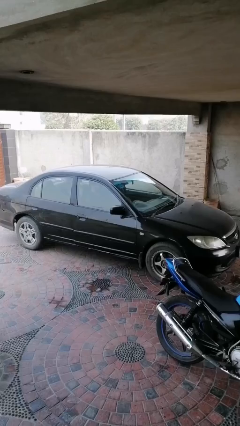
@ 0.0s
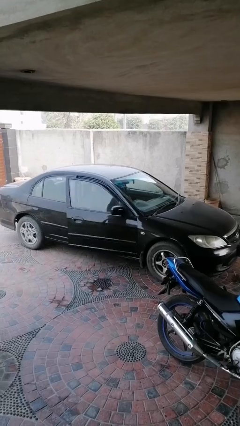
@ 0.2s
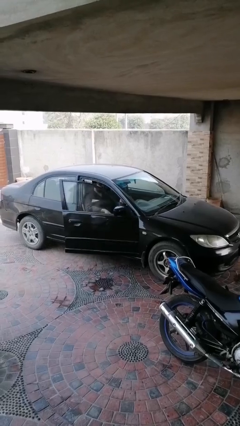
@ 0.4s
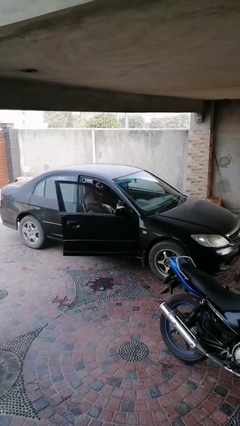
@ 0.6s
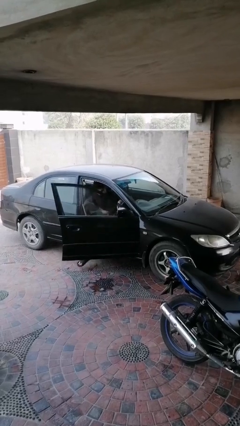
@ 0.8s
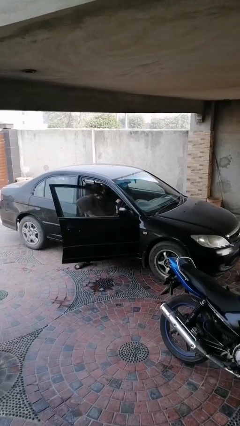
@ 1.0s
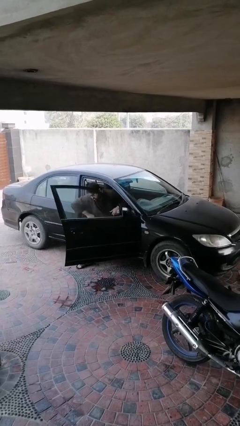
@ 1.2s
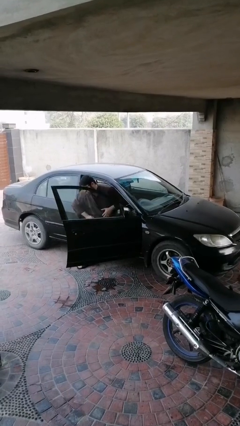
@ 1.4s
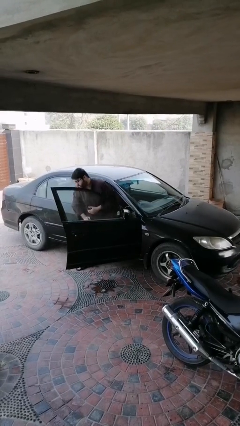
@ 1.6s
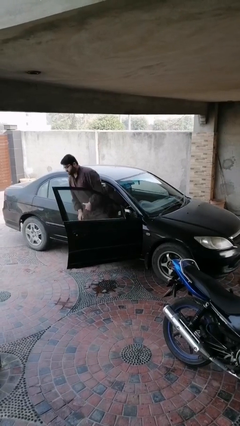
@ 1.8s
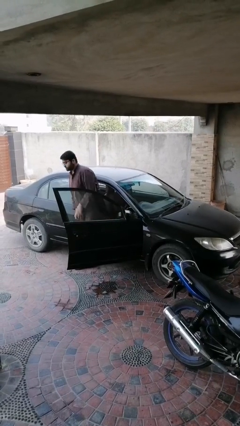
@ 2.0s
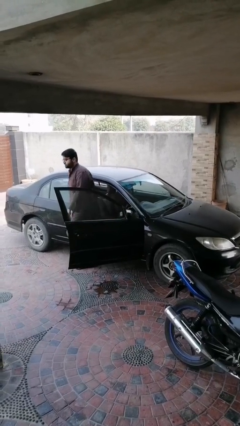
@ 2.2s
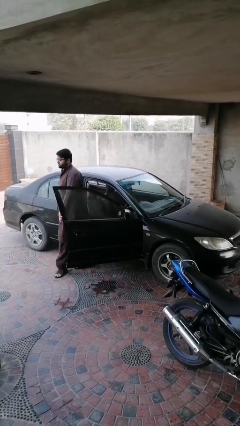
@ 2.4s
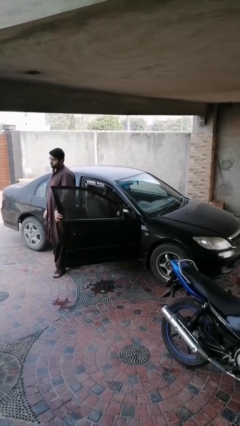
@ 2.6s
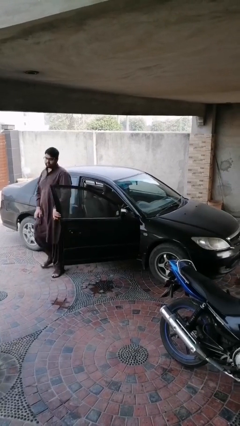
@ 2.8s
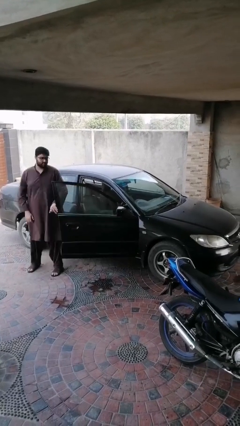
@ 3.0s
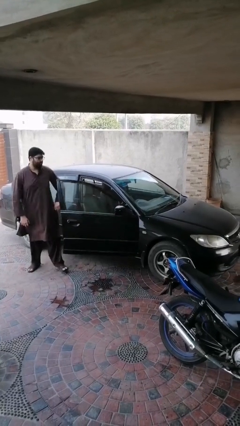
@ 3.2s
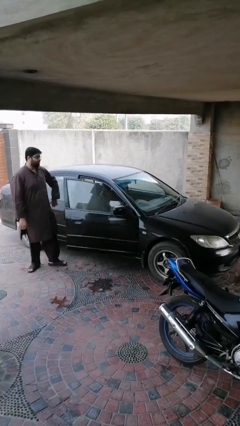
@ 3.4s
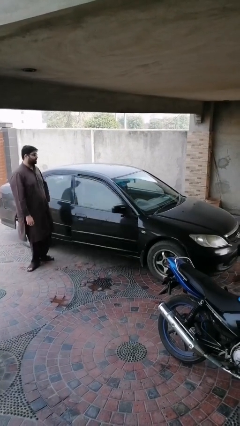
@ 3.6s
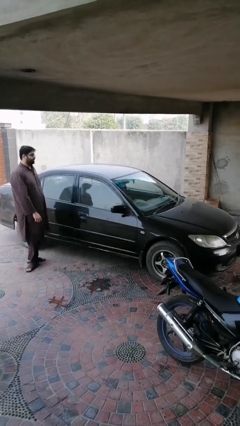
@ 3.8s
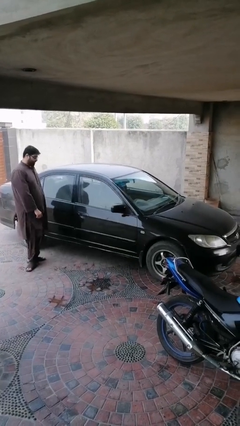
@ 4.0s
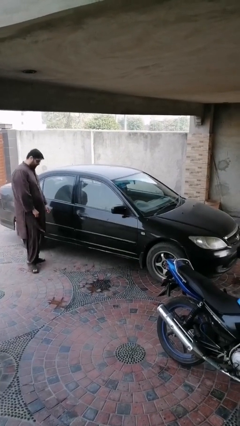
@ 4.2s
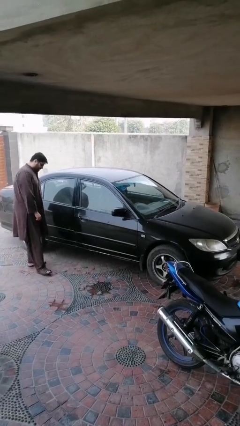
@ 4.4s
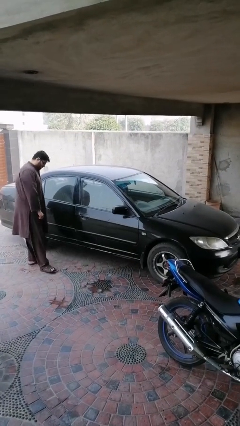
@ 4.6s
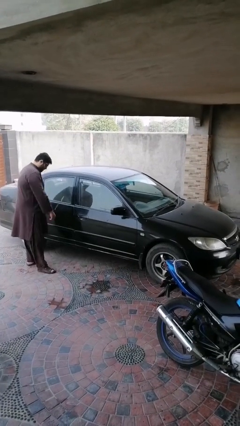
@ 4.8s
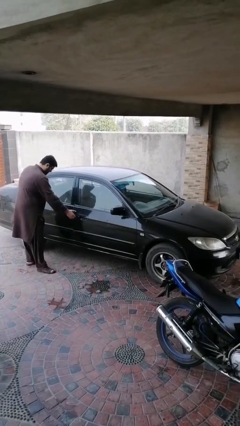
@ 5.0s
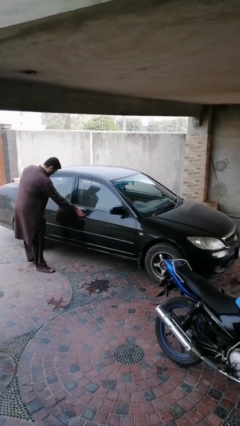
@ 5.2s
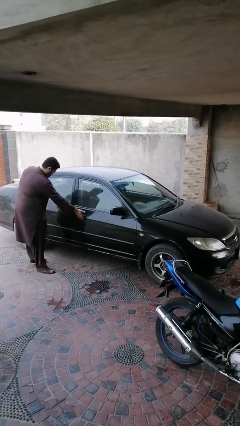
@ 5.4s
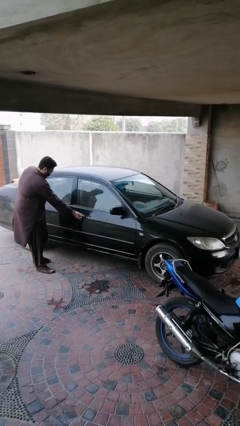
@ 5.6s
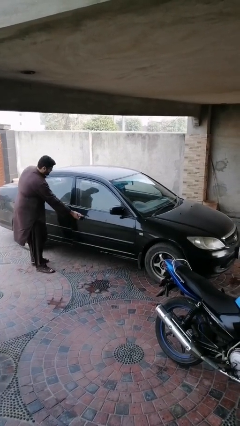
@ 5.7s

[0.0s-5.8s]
car drops off person

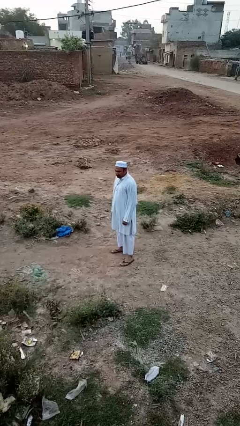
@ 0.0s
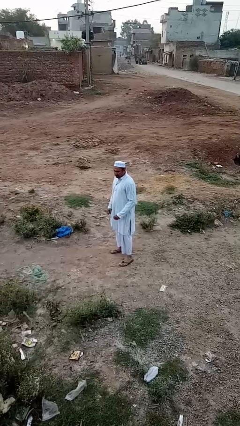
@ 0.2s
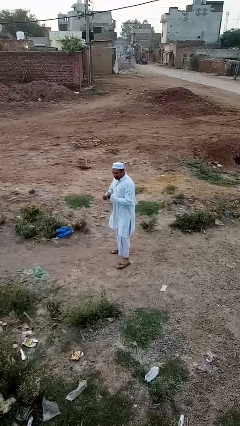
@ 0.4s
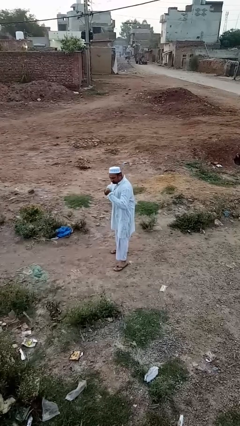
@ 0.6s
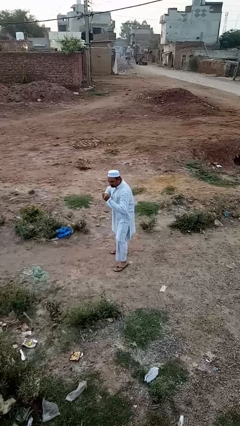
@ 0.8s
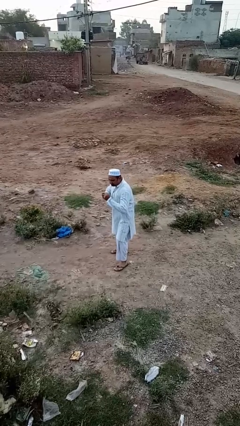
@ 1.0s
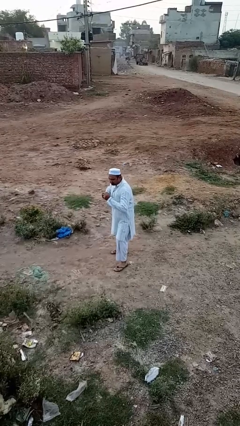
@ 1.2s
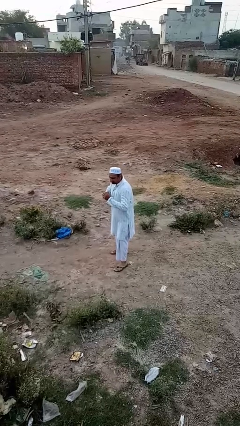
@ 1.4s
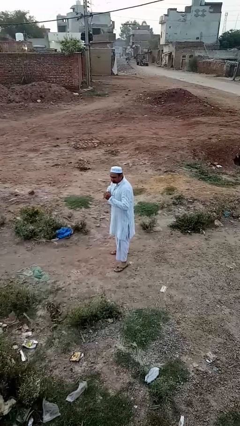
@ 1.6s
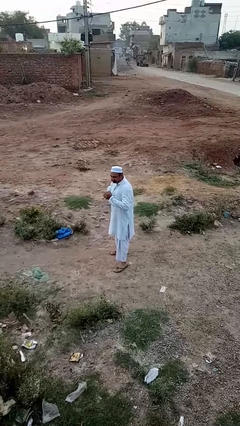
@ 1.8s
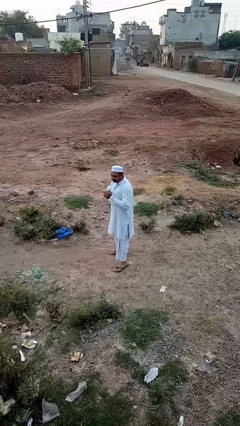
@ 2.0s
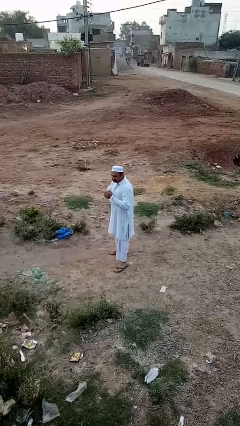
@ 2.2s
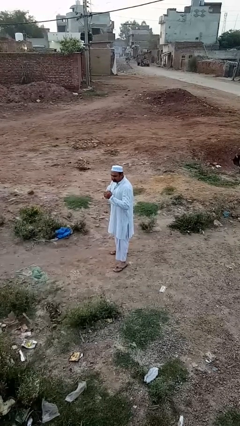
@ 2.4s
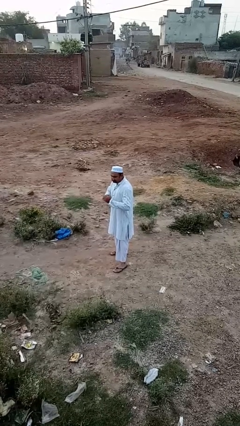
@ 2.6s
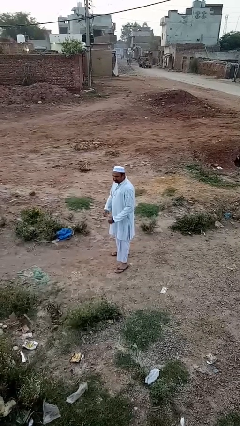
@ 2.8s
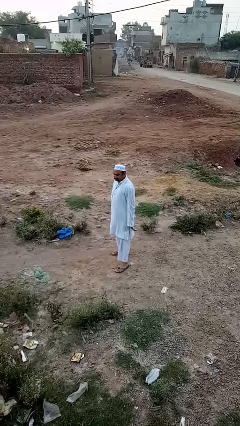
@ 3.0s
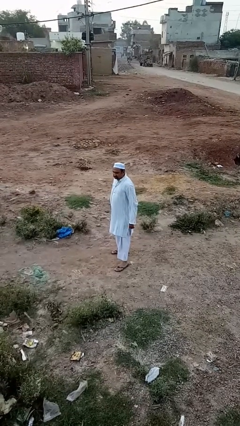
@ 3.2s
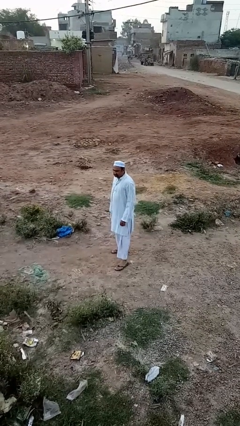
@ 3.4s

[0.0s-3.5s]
person karate chop

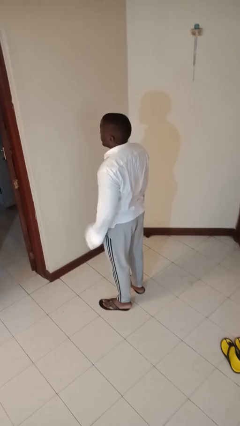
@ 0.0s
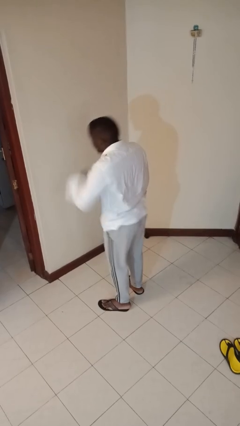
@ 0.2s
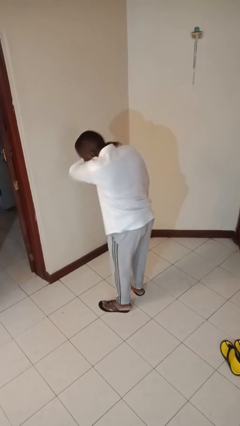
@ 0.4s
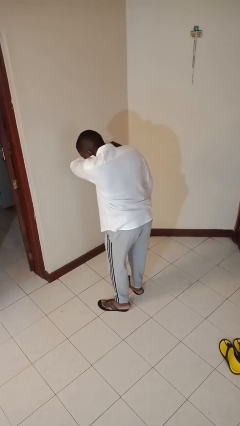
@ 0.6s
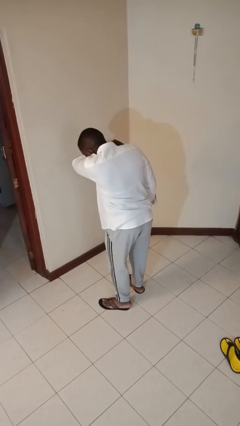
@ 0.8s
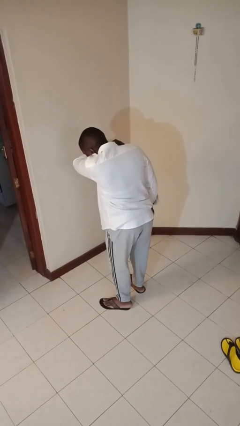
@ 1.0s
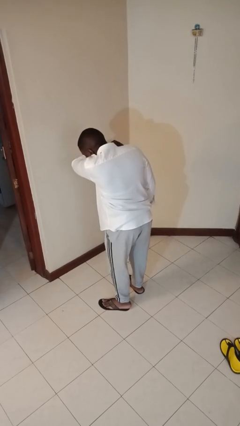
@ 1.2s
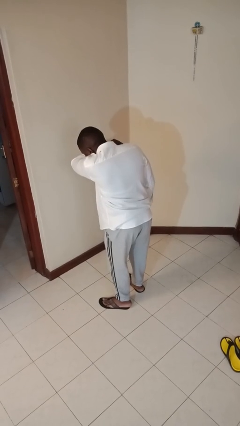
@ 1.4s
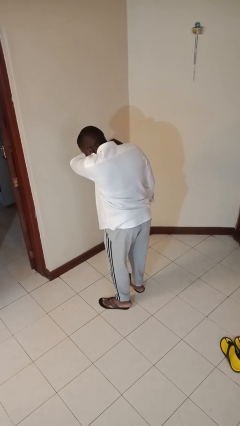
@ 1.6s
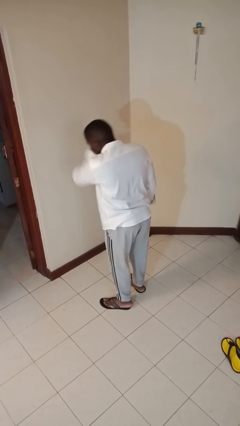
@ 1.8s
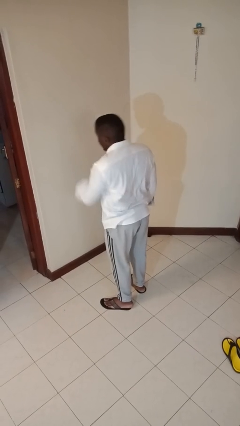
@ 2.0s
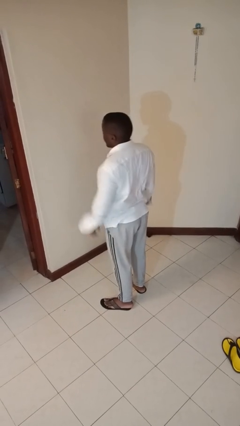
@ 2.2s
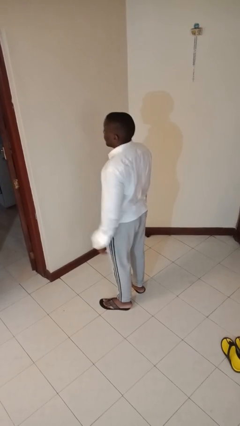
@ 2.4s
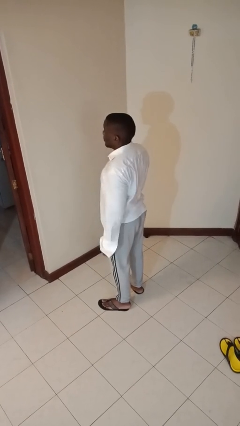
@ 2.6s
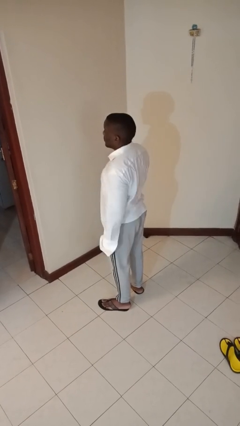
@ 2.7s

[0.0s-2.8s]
person sneezes into arm

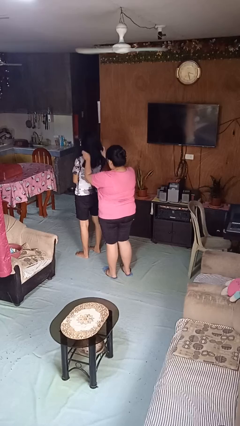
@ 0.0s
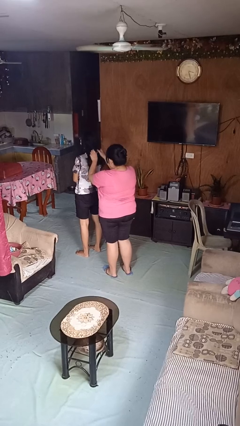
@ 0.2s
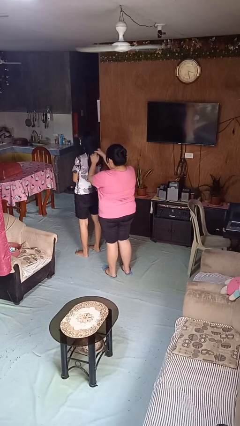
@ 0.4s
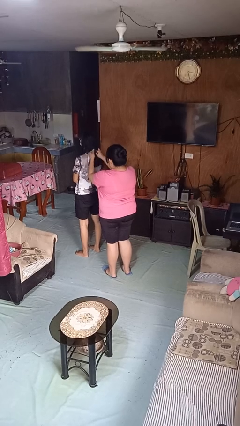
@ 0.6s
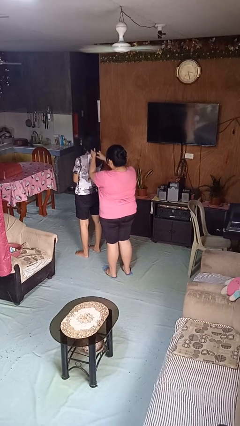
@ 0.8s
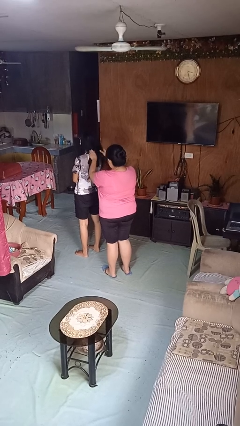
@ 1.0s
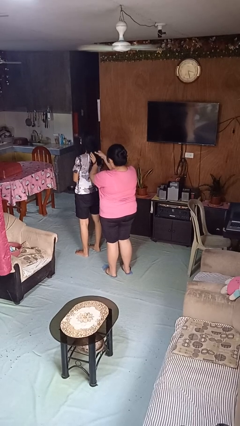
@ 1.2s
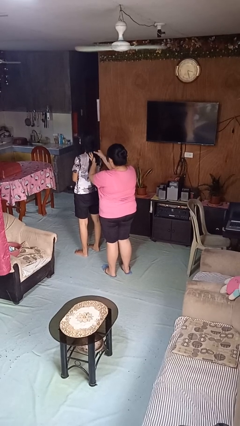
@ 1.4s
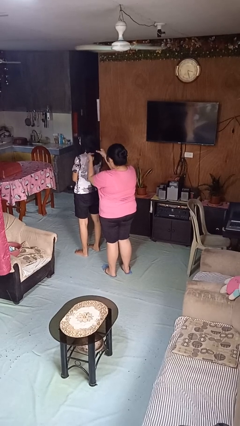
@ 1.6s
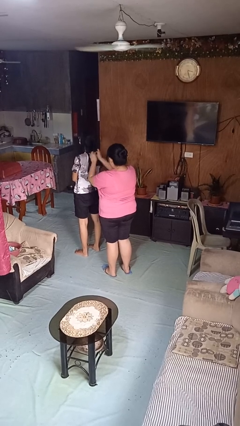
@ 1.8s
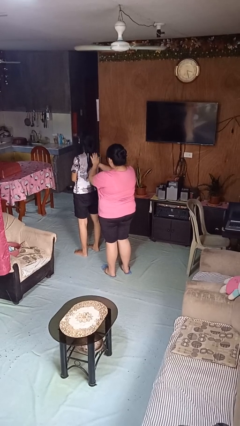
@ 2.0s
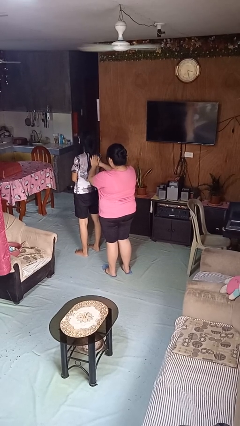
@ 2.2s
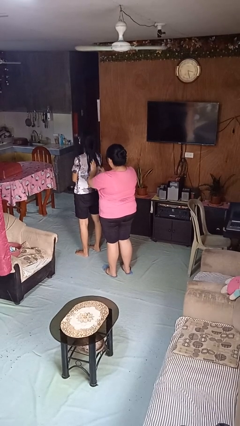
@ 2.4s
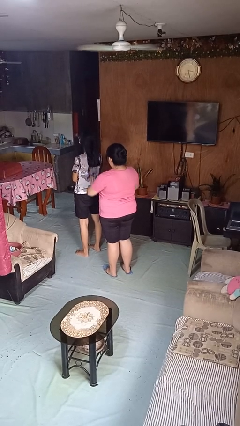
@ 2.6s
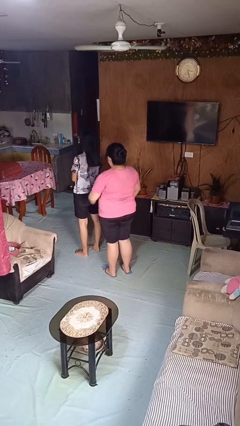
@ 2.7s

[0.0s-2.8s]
person braids hair of person

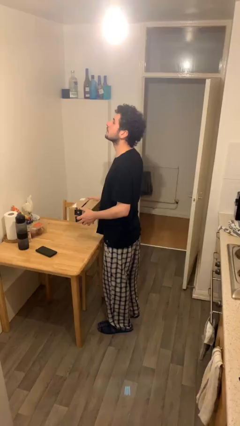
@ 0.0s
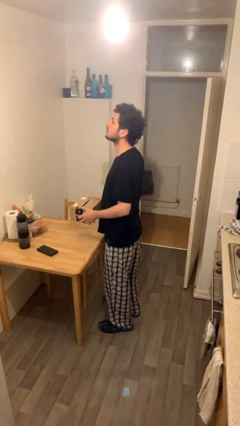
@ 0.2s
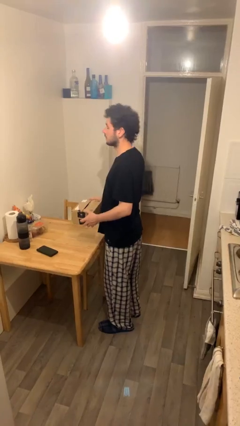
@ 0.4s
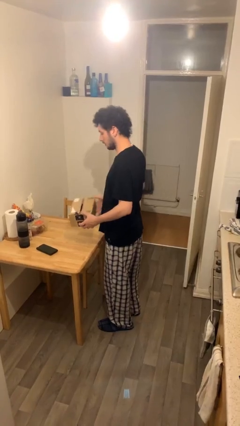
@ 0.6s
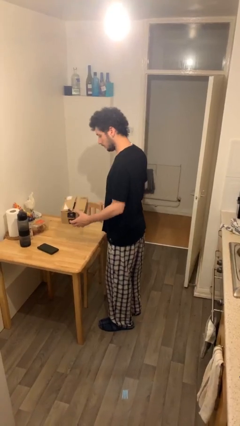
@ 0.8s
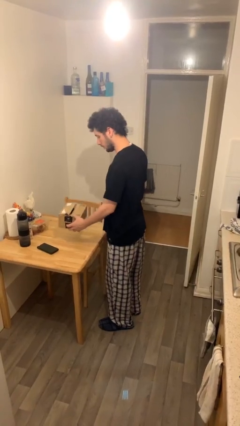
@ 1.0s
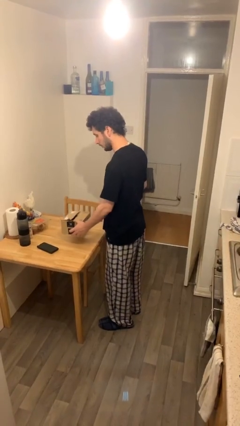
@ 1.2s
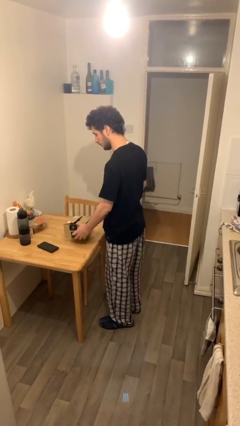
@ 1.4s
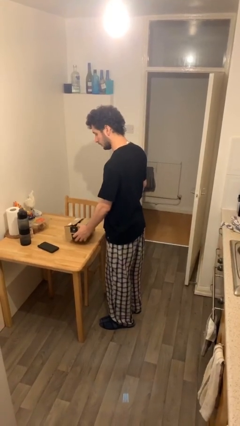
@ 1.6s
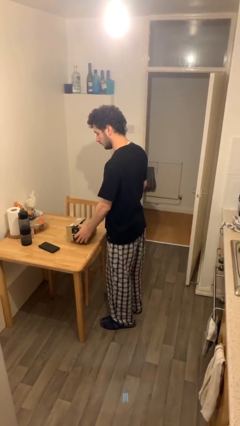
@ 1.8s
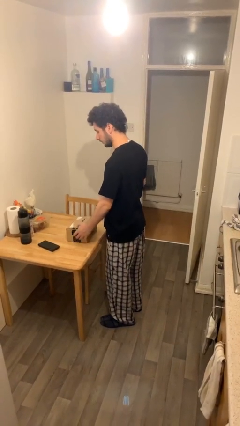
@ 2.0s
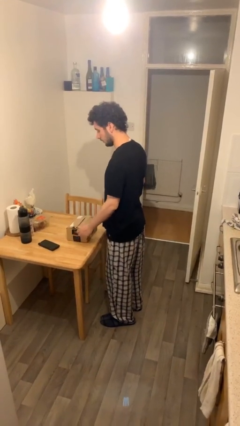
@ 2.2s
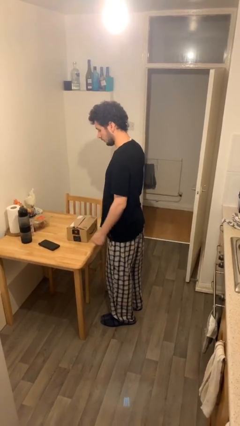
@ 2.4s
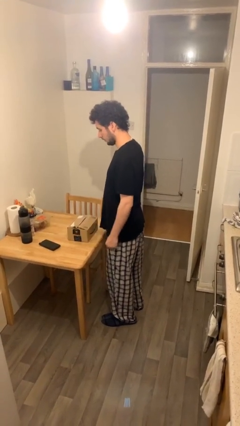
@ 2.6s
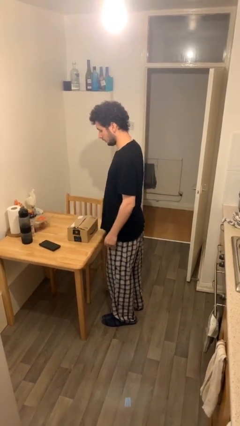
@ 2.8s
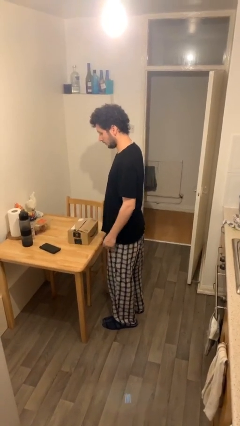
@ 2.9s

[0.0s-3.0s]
person puts down object on table
